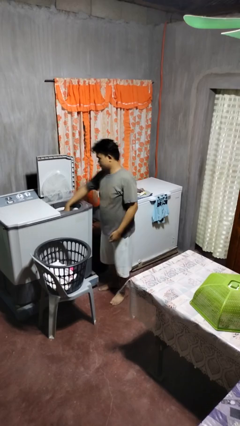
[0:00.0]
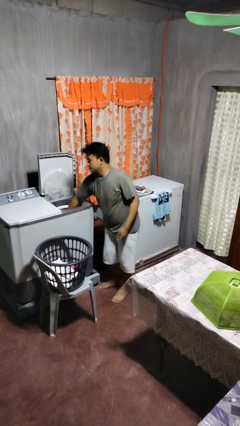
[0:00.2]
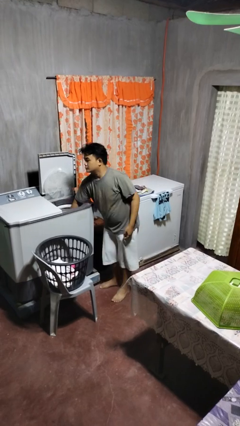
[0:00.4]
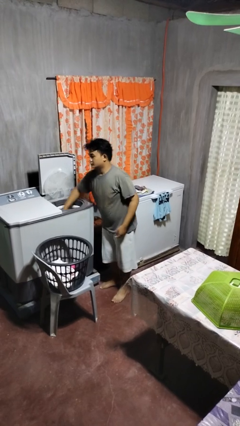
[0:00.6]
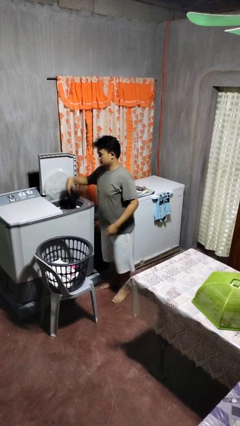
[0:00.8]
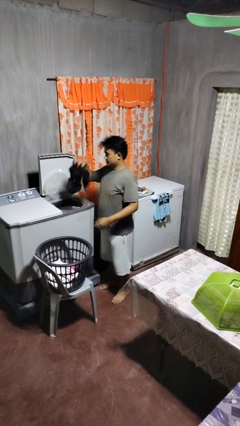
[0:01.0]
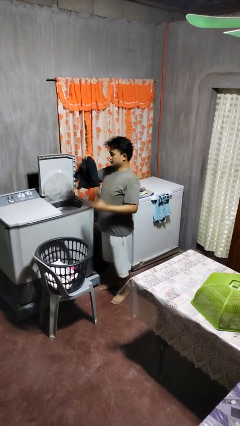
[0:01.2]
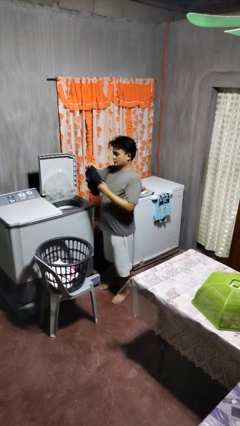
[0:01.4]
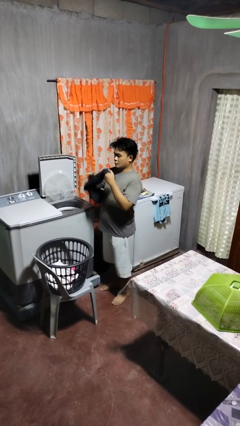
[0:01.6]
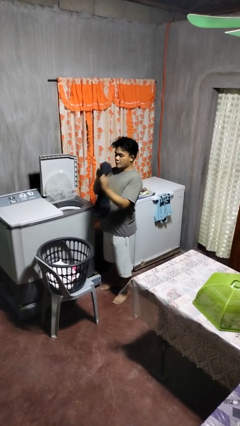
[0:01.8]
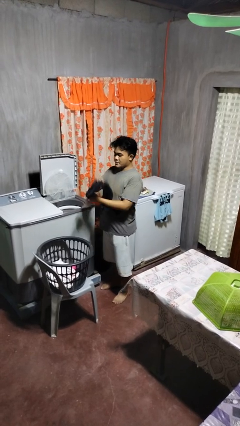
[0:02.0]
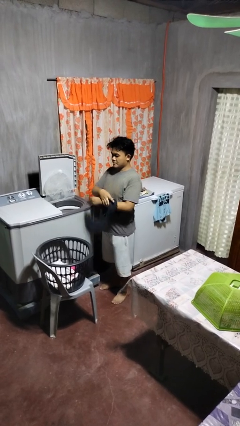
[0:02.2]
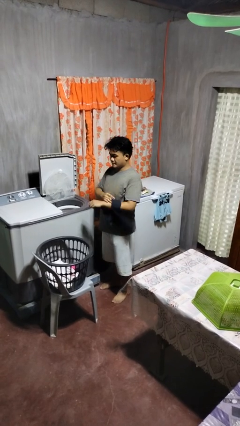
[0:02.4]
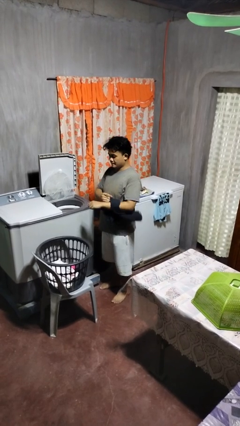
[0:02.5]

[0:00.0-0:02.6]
person unloads dryer

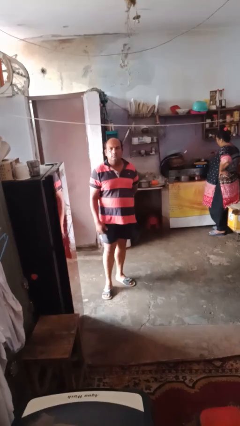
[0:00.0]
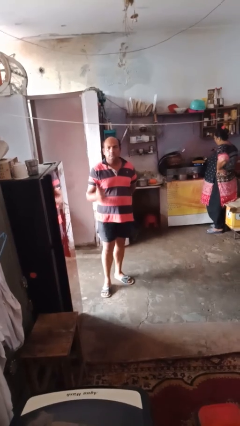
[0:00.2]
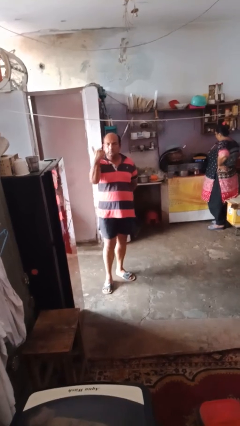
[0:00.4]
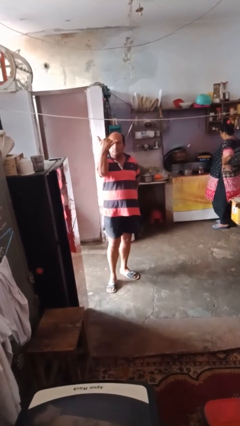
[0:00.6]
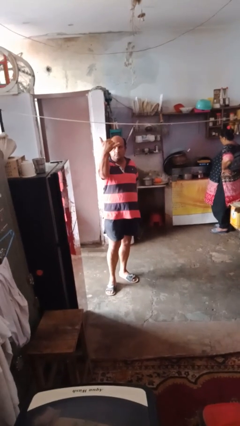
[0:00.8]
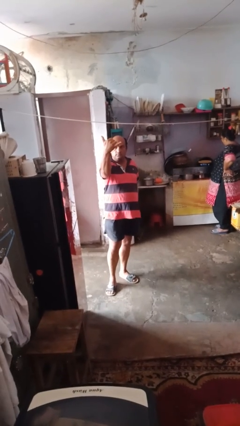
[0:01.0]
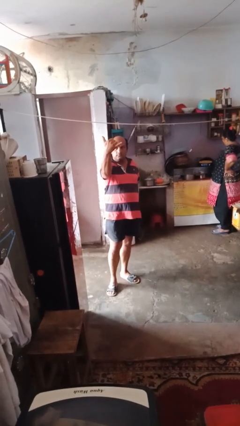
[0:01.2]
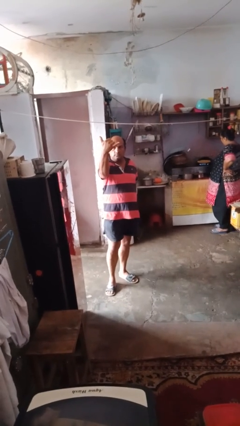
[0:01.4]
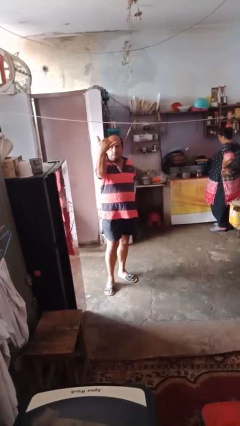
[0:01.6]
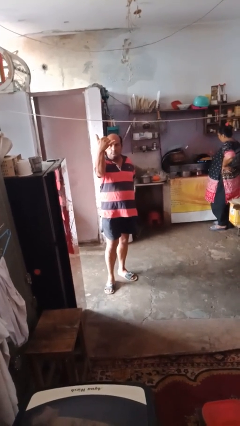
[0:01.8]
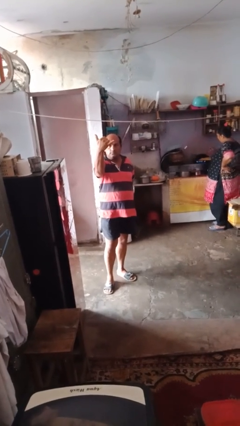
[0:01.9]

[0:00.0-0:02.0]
person gestures behind me

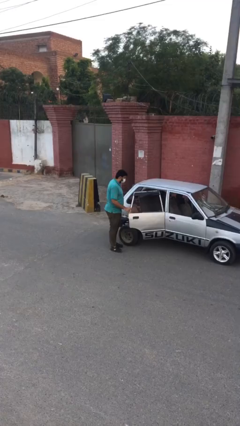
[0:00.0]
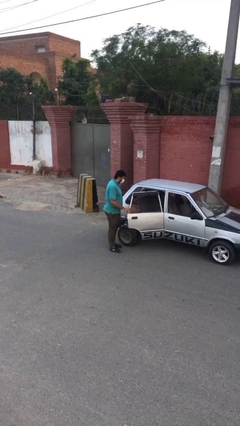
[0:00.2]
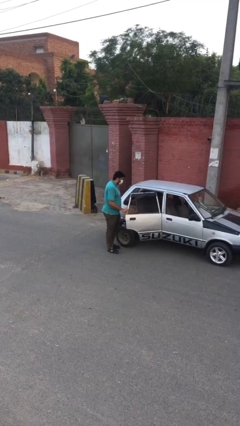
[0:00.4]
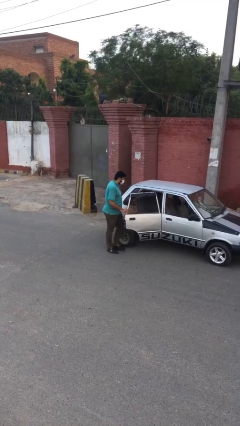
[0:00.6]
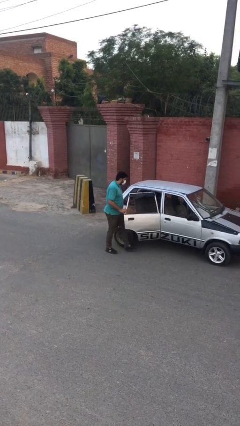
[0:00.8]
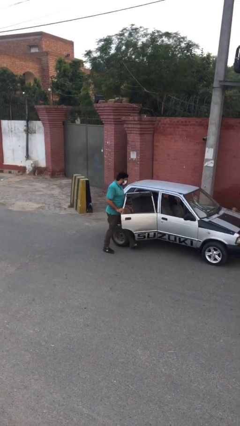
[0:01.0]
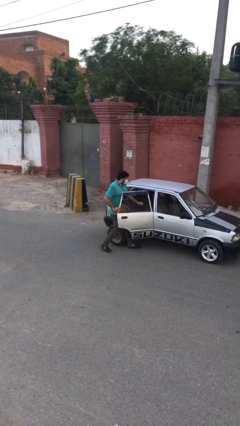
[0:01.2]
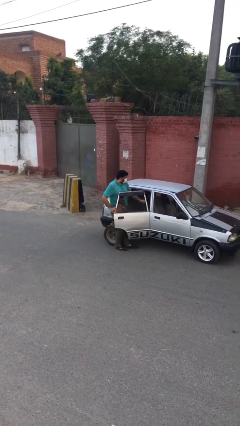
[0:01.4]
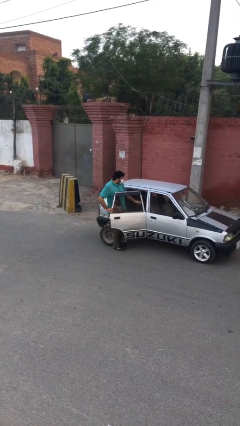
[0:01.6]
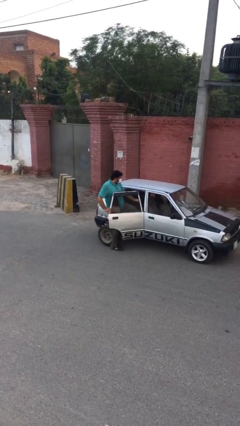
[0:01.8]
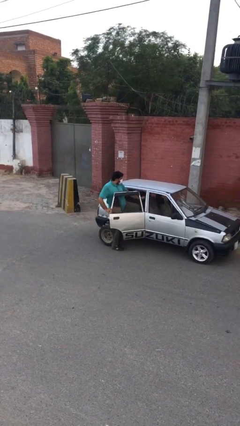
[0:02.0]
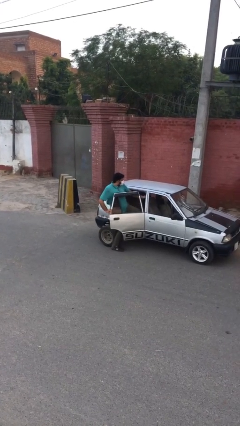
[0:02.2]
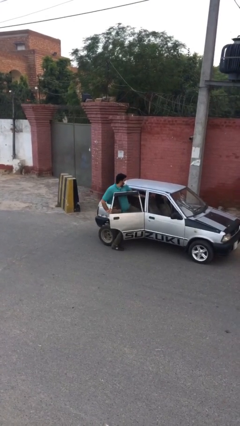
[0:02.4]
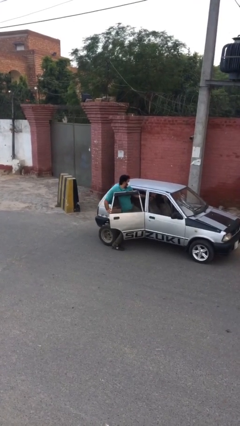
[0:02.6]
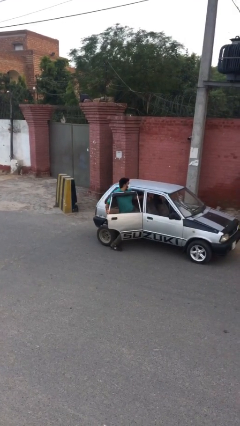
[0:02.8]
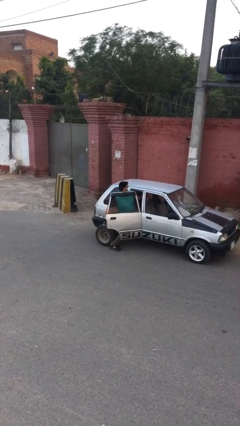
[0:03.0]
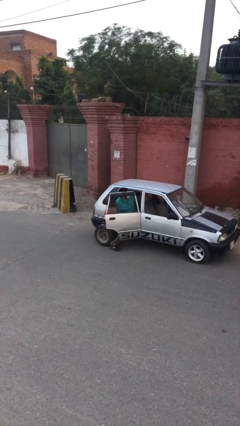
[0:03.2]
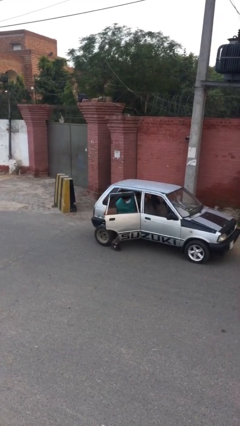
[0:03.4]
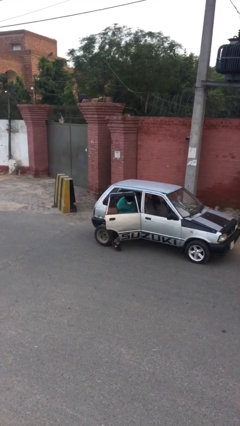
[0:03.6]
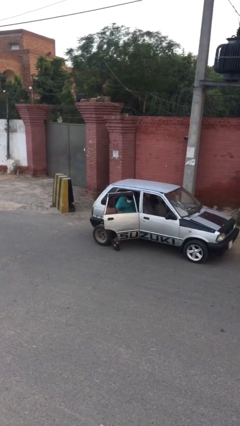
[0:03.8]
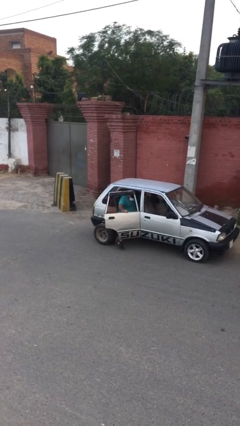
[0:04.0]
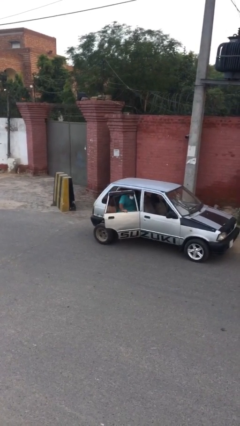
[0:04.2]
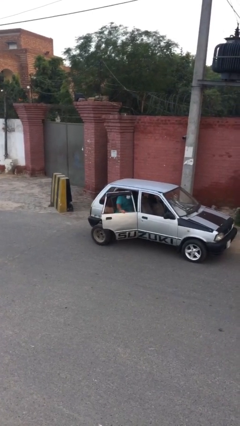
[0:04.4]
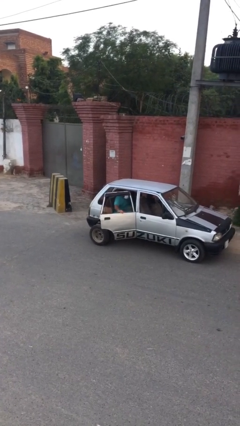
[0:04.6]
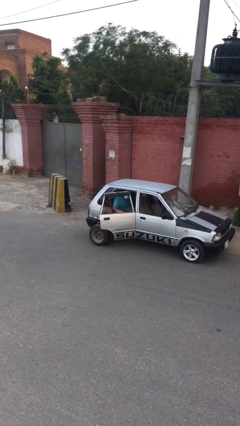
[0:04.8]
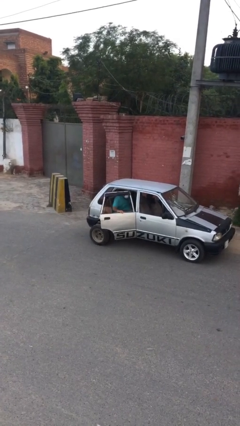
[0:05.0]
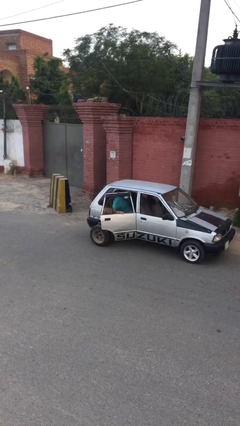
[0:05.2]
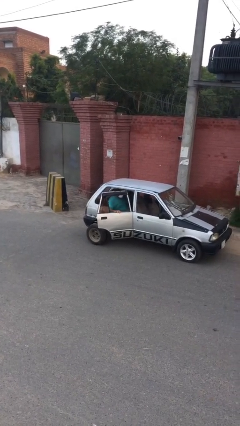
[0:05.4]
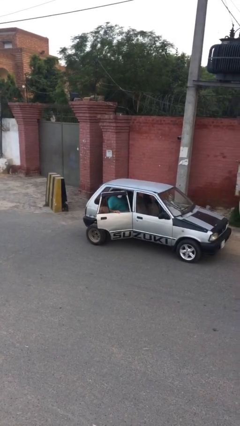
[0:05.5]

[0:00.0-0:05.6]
person enters car

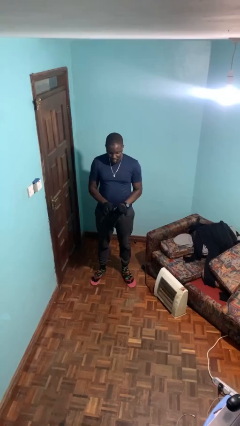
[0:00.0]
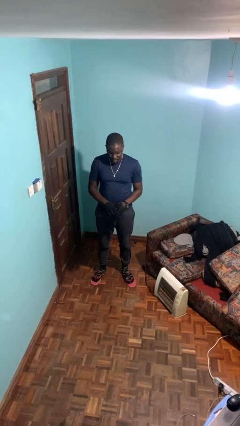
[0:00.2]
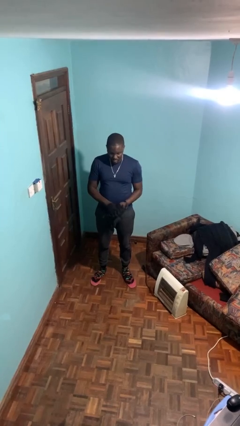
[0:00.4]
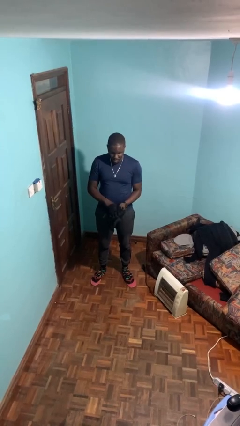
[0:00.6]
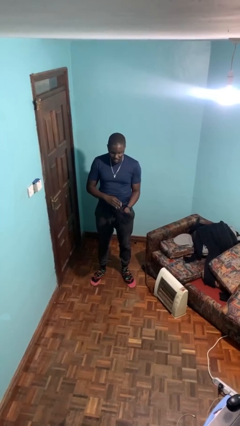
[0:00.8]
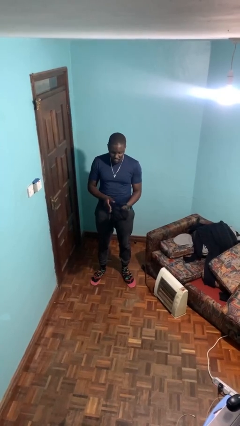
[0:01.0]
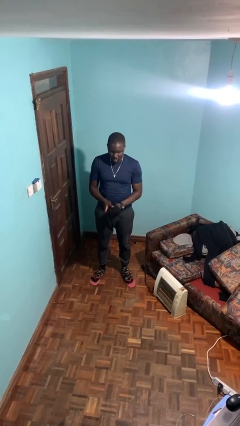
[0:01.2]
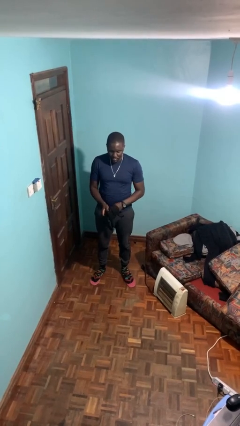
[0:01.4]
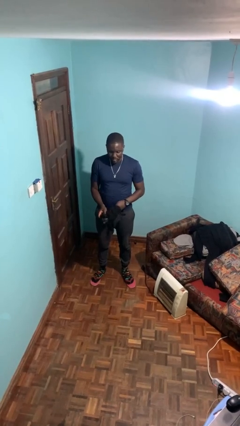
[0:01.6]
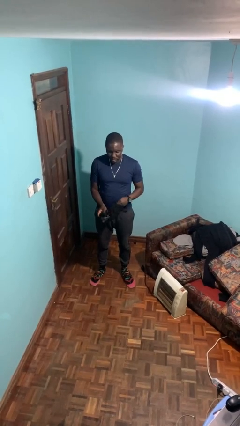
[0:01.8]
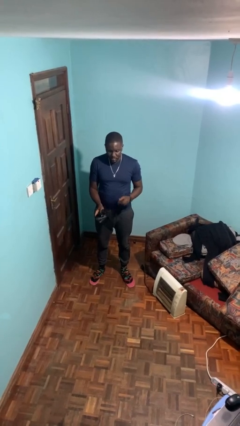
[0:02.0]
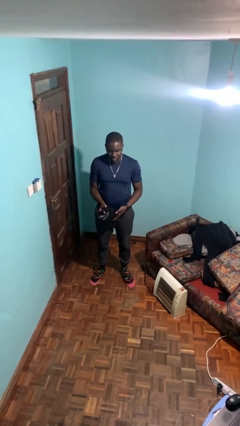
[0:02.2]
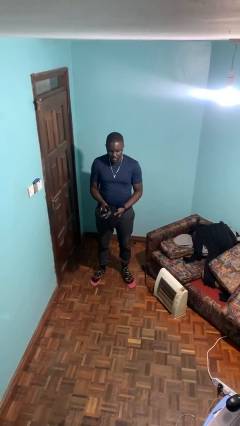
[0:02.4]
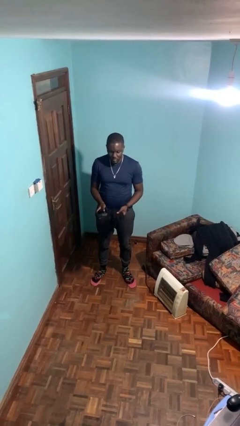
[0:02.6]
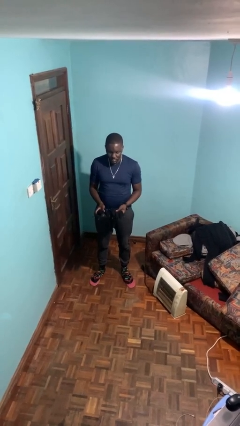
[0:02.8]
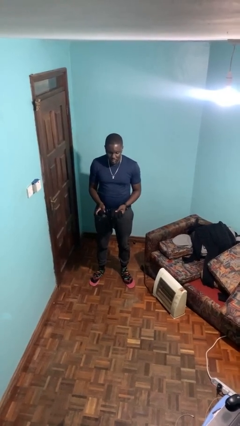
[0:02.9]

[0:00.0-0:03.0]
person takes off gloves

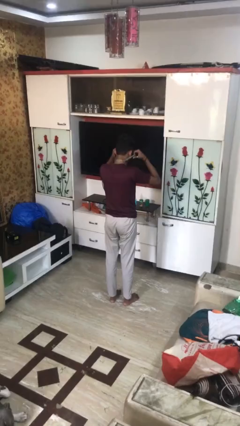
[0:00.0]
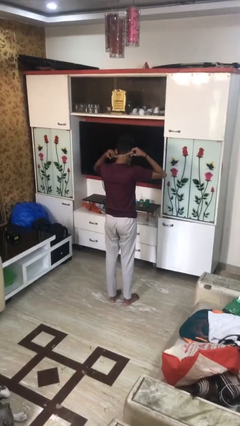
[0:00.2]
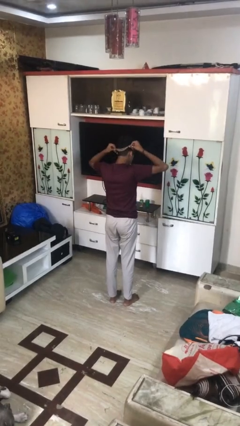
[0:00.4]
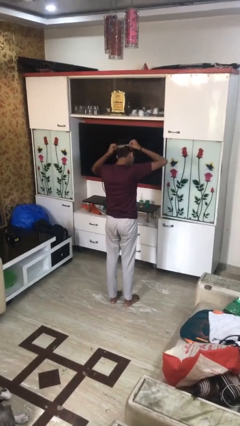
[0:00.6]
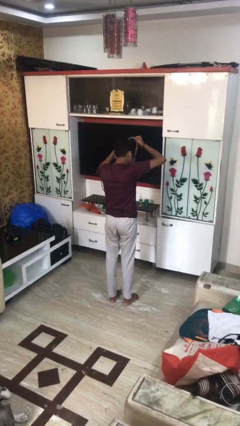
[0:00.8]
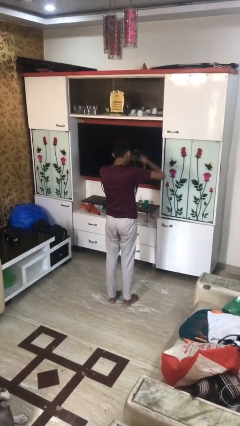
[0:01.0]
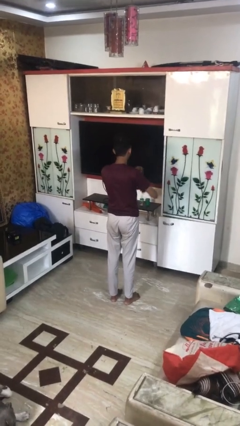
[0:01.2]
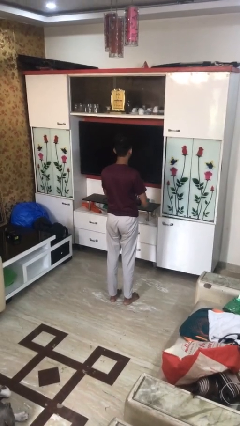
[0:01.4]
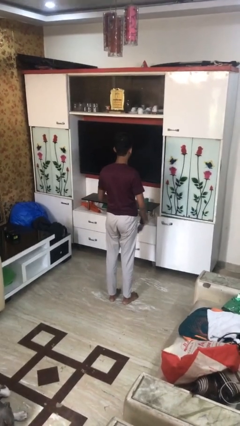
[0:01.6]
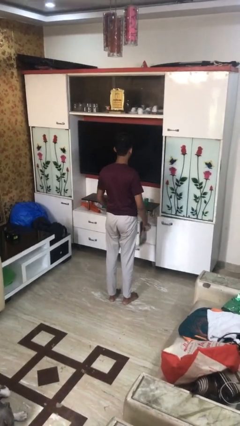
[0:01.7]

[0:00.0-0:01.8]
person takes off necktie

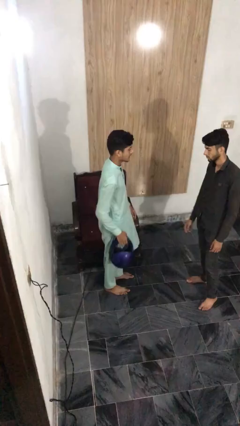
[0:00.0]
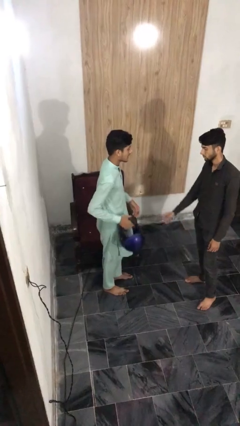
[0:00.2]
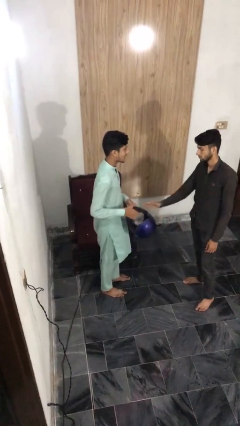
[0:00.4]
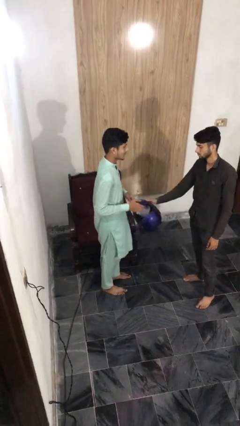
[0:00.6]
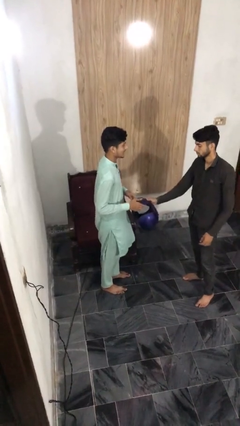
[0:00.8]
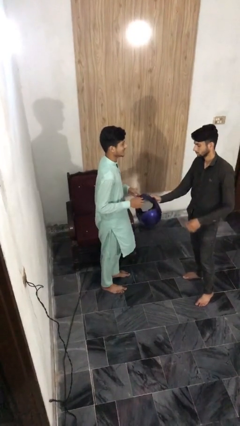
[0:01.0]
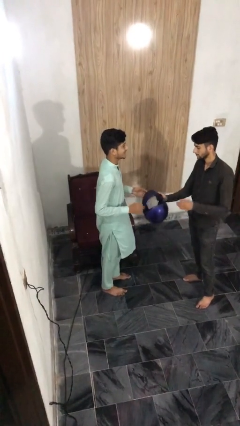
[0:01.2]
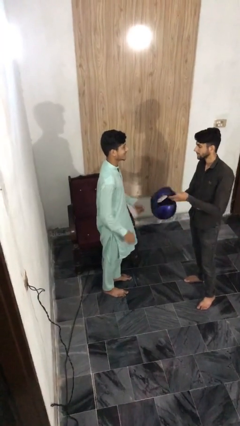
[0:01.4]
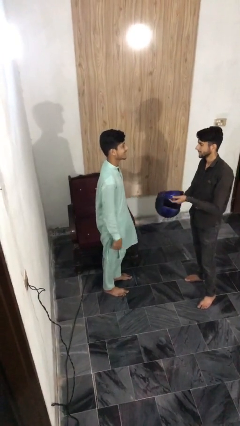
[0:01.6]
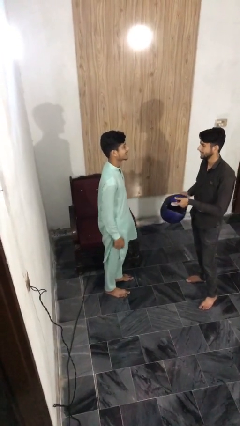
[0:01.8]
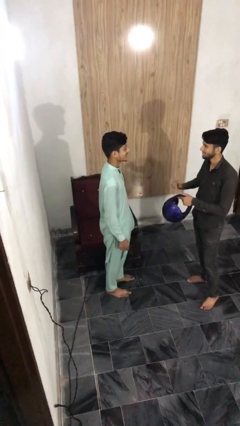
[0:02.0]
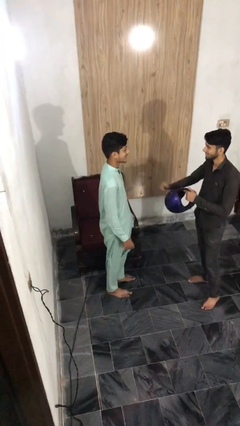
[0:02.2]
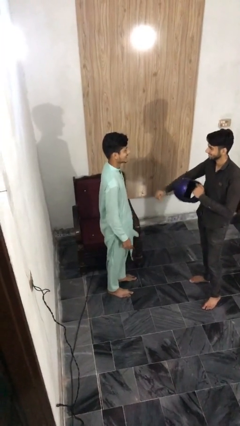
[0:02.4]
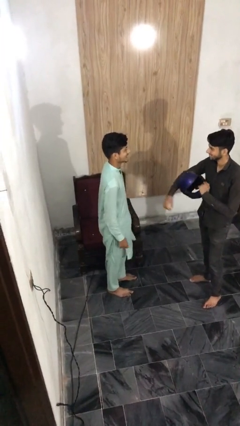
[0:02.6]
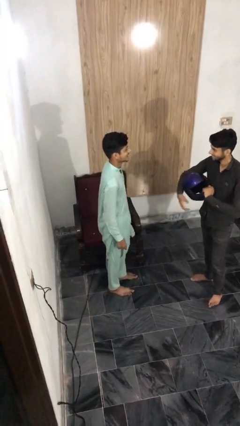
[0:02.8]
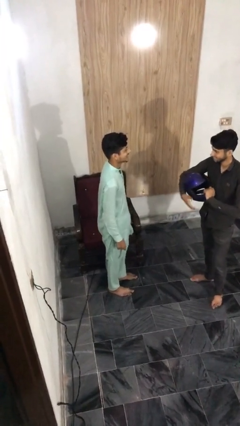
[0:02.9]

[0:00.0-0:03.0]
person transfers object to person
